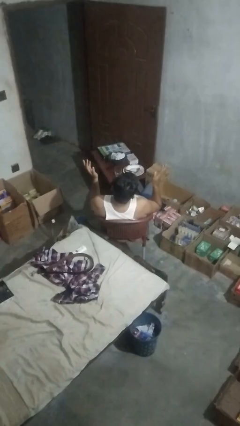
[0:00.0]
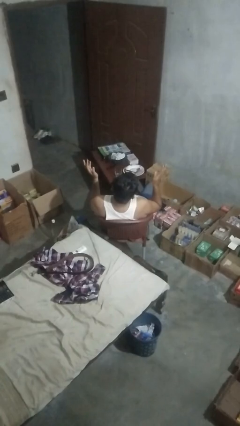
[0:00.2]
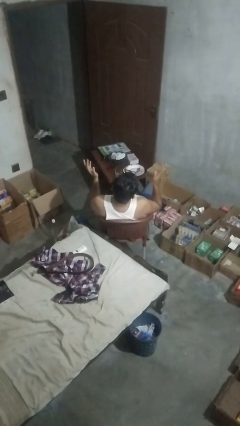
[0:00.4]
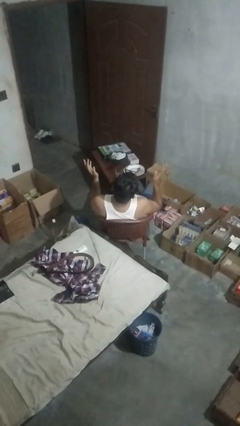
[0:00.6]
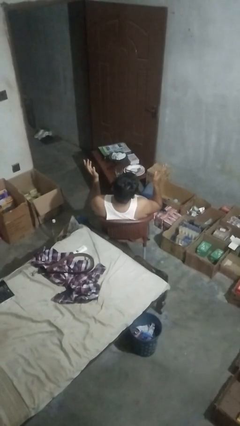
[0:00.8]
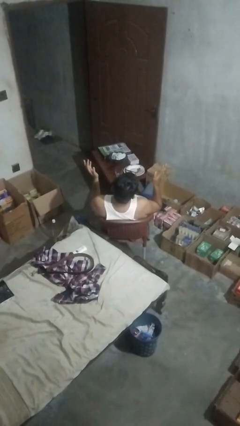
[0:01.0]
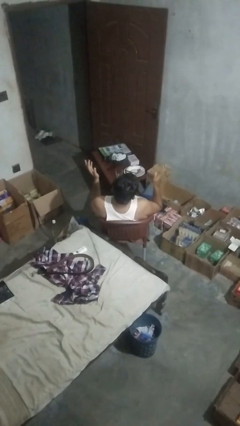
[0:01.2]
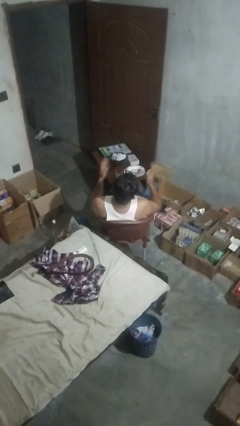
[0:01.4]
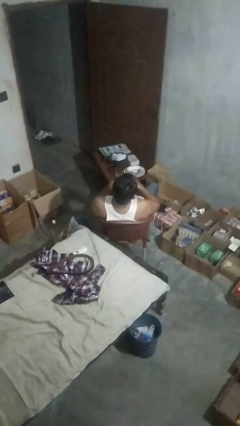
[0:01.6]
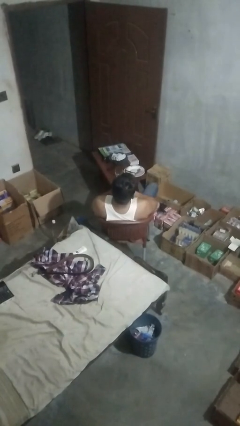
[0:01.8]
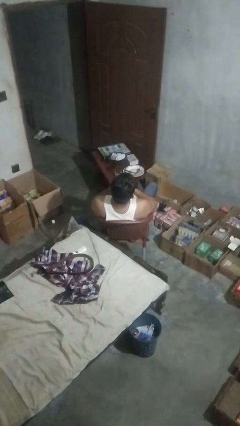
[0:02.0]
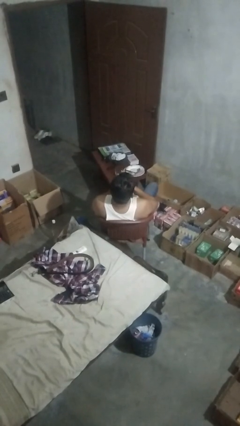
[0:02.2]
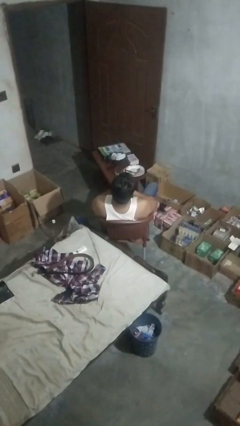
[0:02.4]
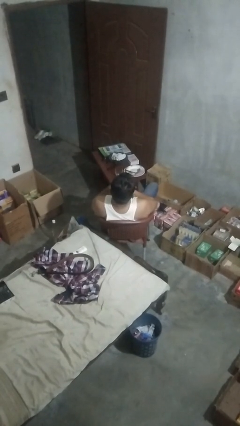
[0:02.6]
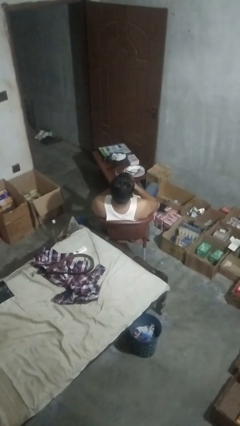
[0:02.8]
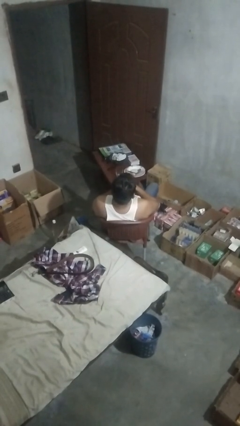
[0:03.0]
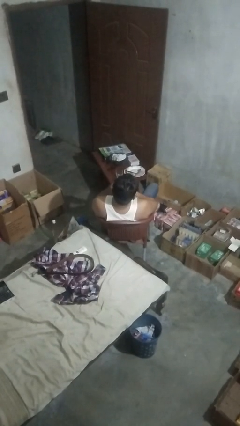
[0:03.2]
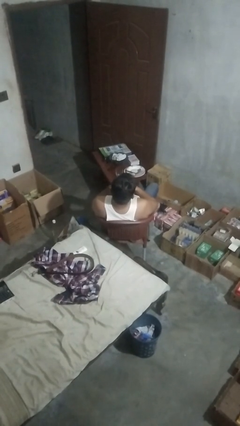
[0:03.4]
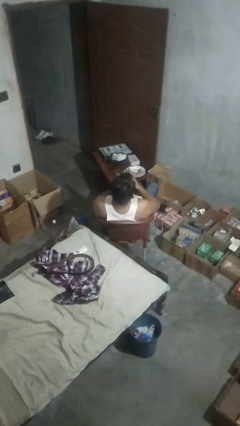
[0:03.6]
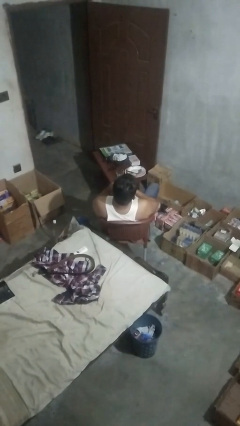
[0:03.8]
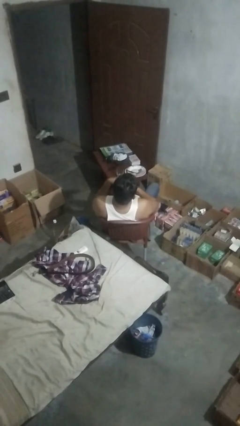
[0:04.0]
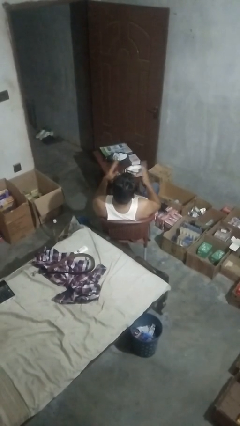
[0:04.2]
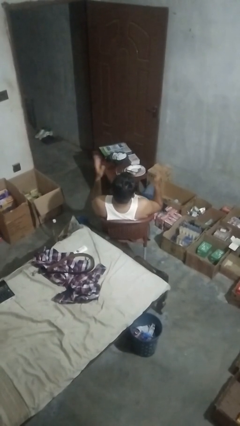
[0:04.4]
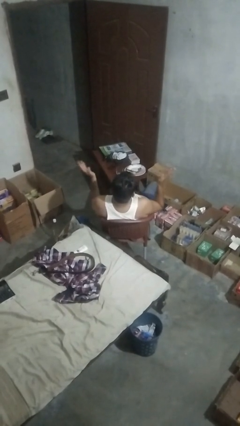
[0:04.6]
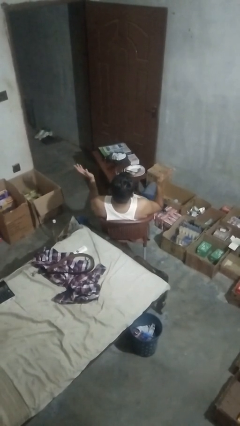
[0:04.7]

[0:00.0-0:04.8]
person drums on chest

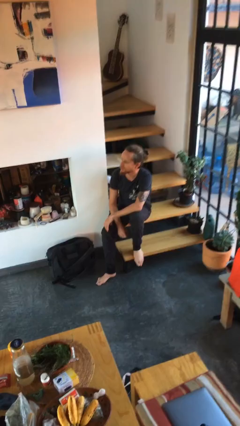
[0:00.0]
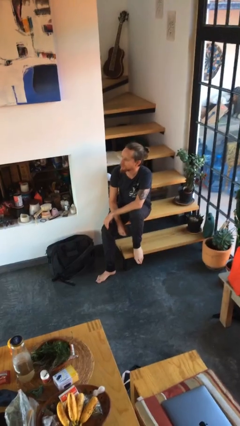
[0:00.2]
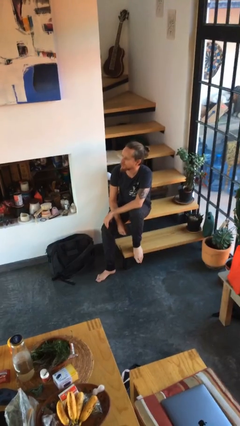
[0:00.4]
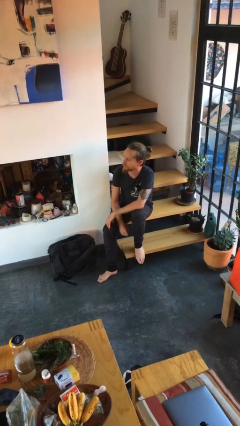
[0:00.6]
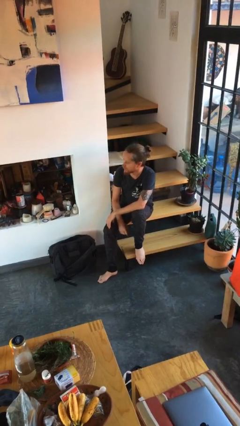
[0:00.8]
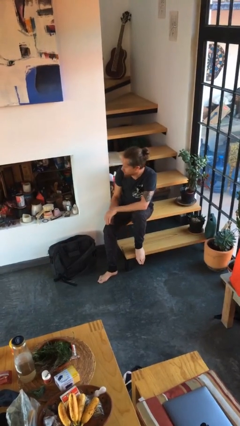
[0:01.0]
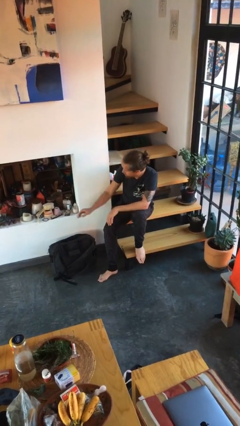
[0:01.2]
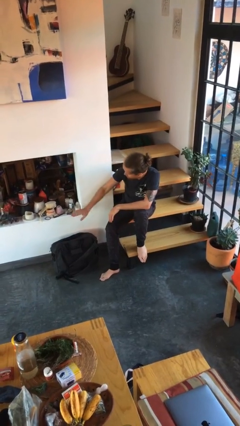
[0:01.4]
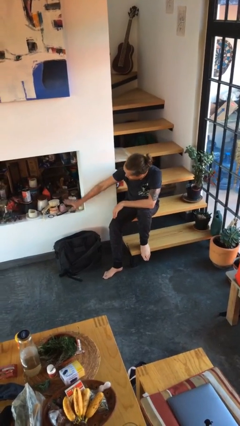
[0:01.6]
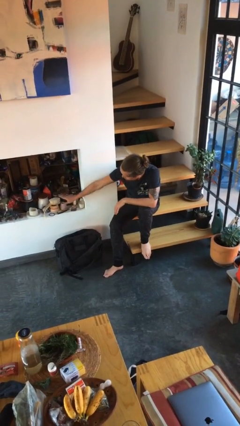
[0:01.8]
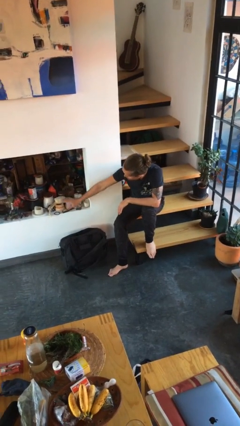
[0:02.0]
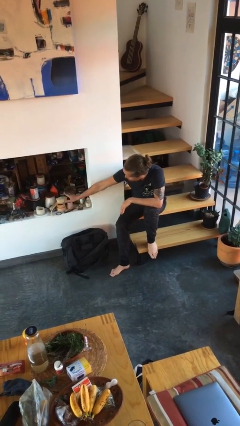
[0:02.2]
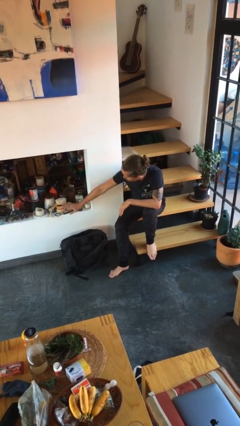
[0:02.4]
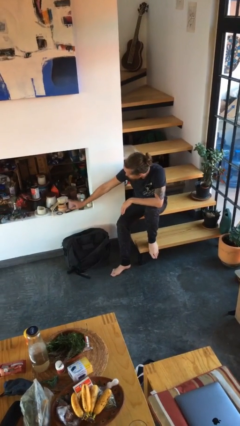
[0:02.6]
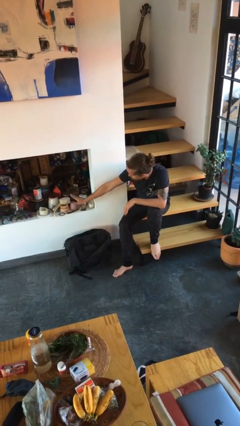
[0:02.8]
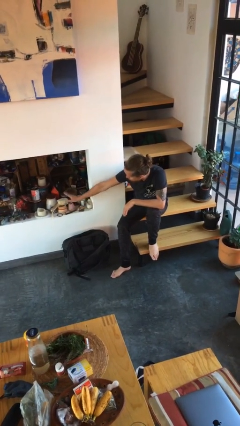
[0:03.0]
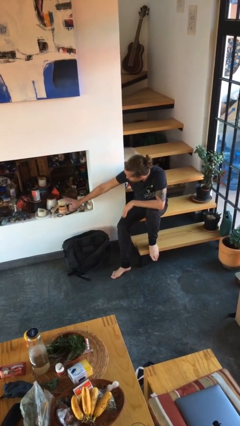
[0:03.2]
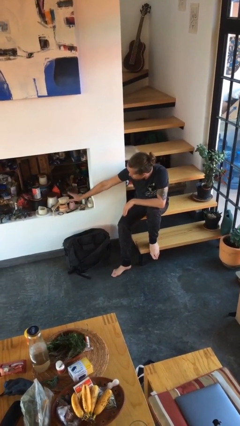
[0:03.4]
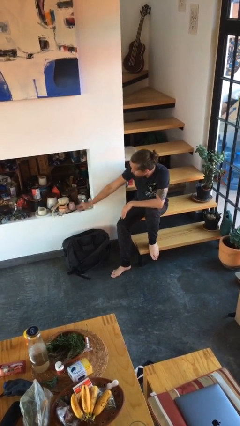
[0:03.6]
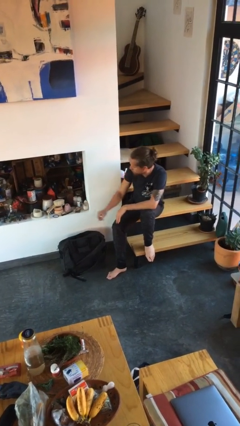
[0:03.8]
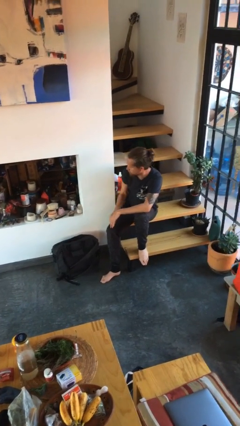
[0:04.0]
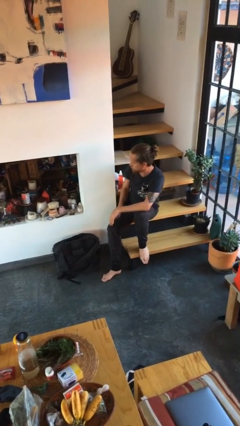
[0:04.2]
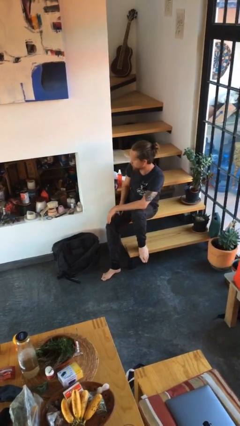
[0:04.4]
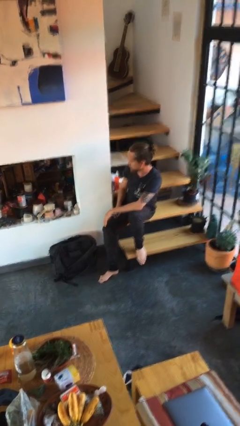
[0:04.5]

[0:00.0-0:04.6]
person waves hand over object

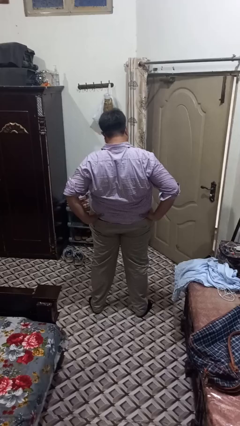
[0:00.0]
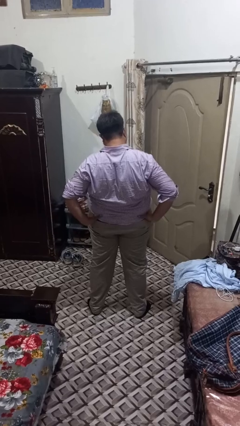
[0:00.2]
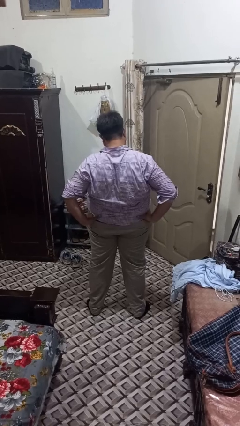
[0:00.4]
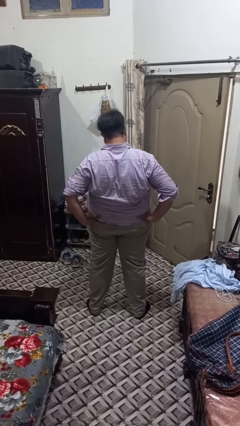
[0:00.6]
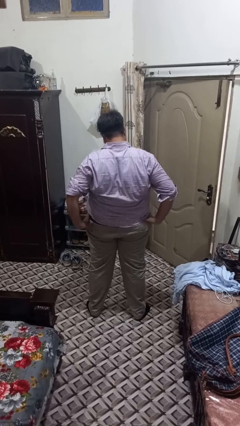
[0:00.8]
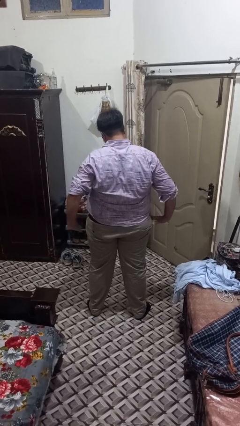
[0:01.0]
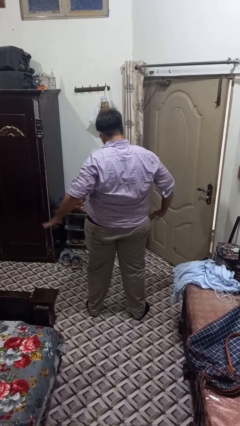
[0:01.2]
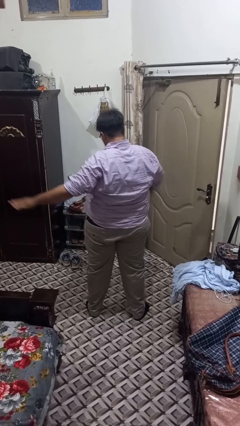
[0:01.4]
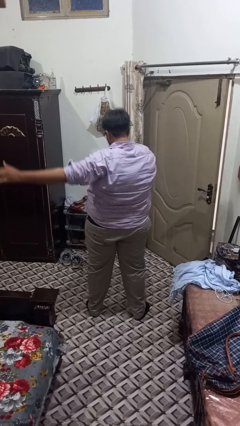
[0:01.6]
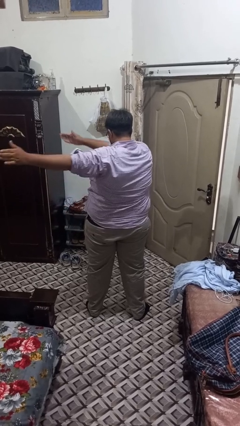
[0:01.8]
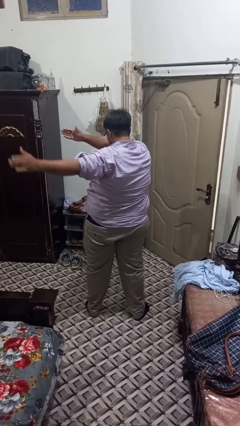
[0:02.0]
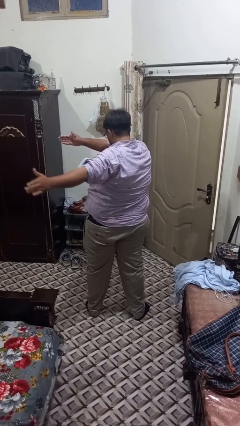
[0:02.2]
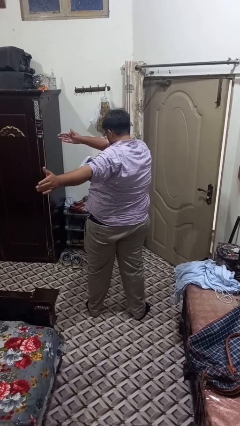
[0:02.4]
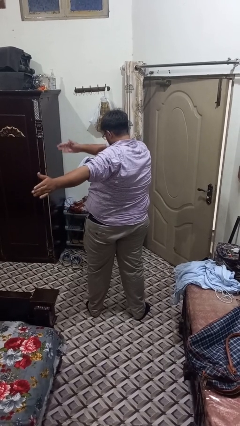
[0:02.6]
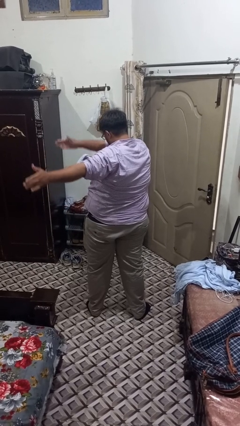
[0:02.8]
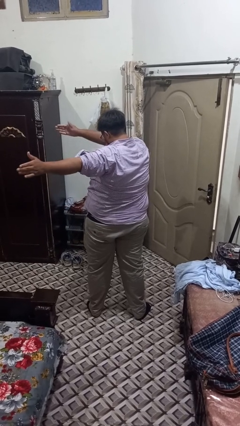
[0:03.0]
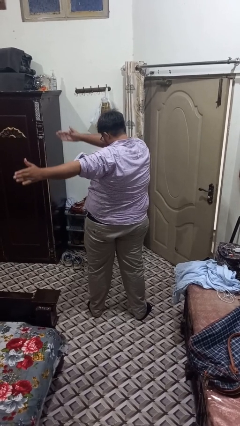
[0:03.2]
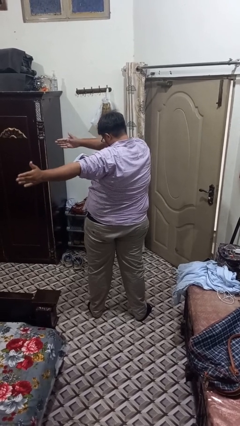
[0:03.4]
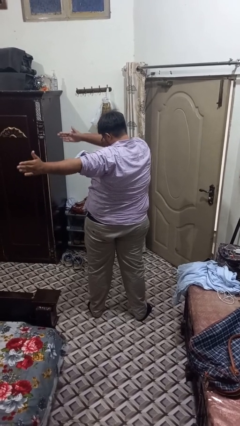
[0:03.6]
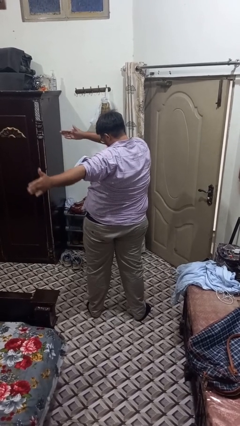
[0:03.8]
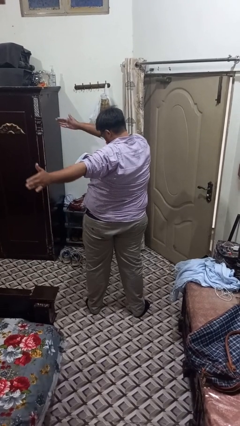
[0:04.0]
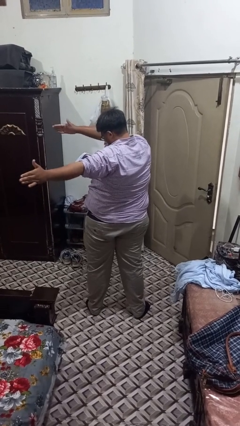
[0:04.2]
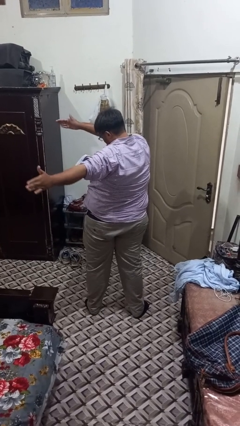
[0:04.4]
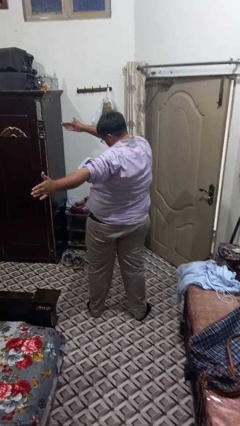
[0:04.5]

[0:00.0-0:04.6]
person stretches arms to side

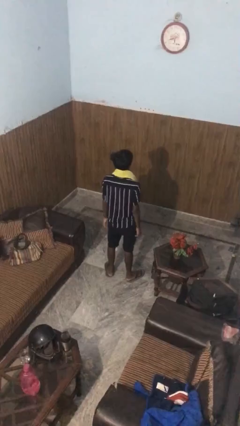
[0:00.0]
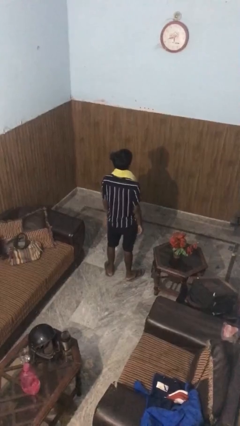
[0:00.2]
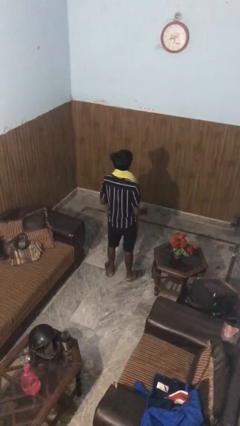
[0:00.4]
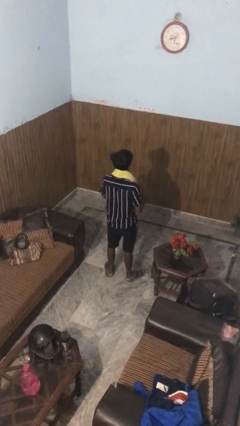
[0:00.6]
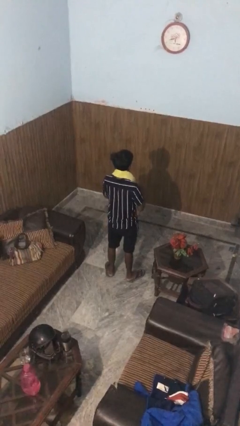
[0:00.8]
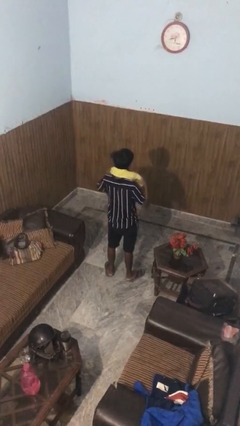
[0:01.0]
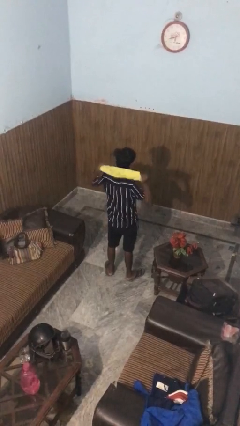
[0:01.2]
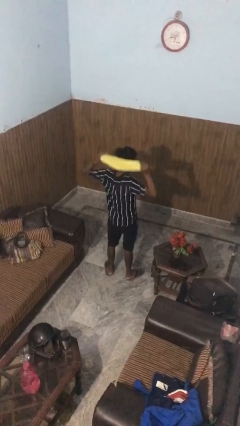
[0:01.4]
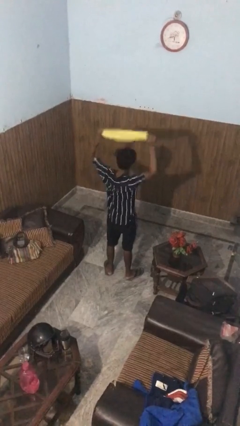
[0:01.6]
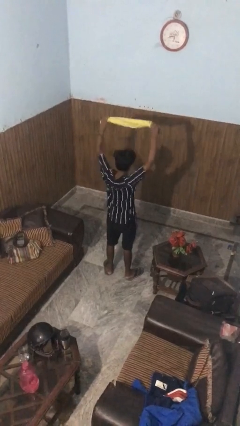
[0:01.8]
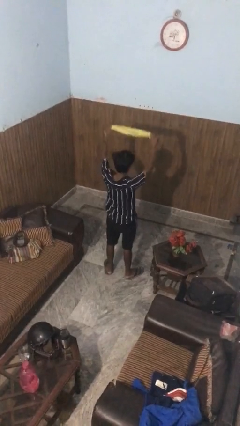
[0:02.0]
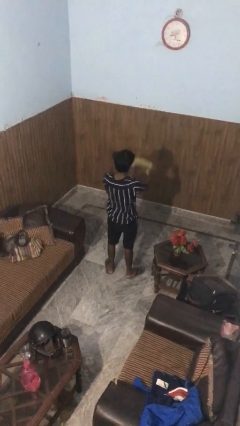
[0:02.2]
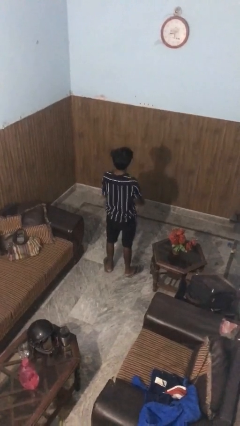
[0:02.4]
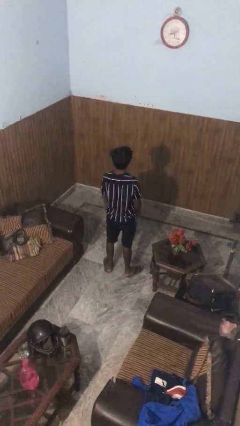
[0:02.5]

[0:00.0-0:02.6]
person takes off scarf

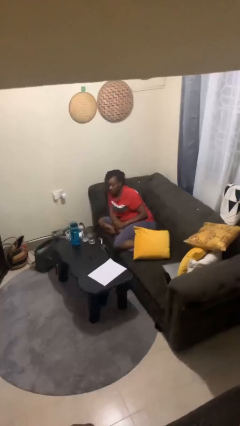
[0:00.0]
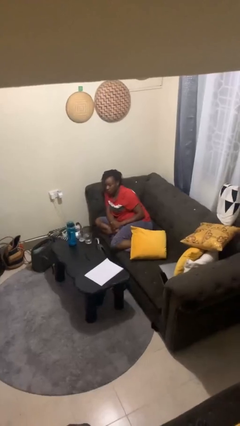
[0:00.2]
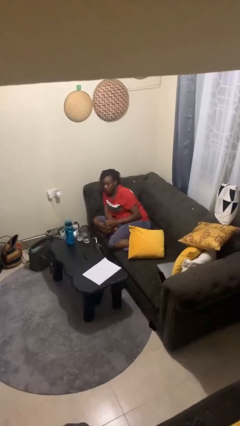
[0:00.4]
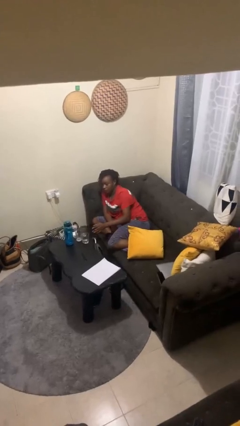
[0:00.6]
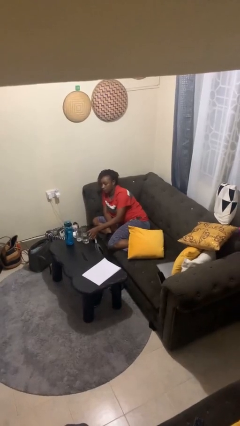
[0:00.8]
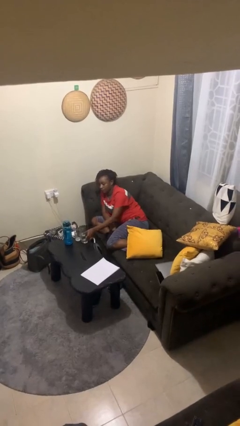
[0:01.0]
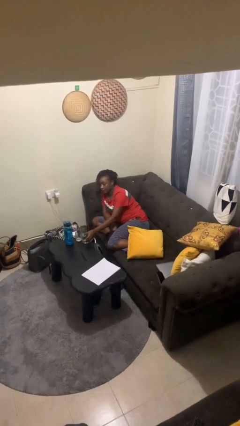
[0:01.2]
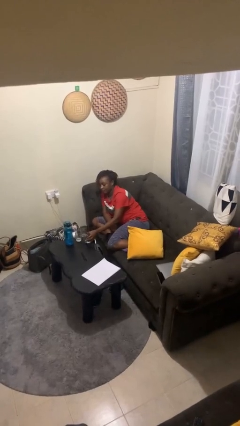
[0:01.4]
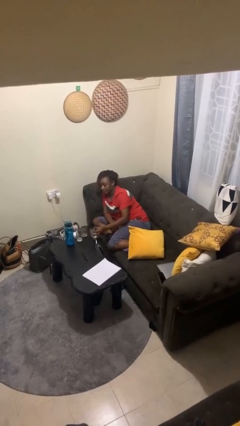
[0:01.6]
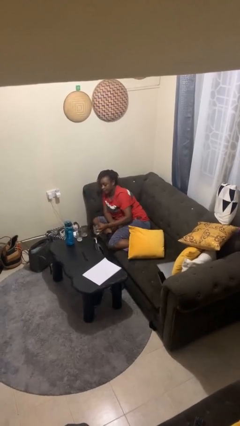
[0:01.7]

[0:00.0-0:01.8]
person picks up object from table
